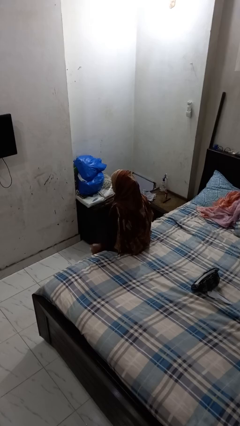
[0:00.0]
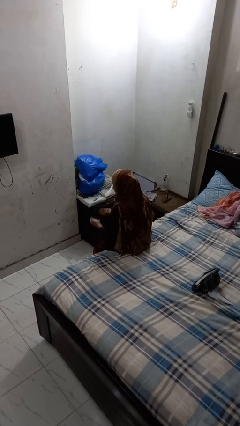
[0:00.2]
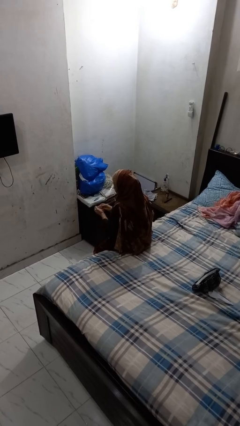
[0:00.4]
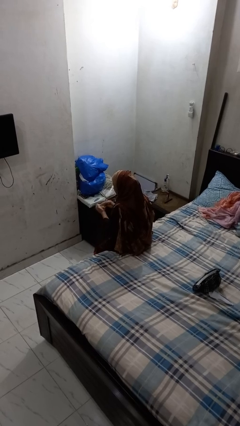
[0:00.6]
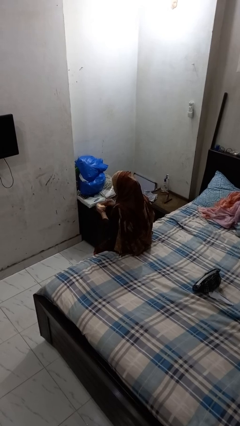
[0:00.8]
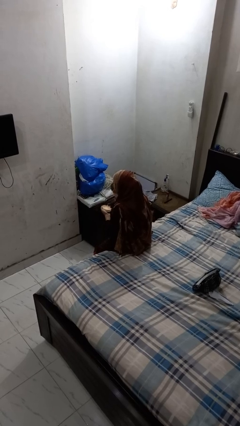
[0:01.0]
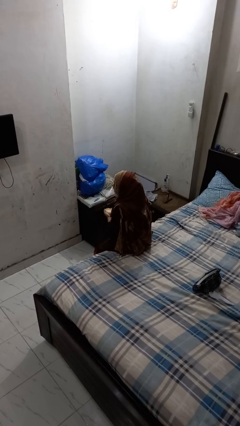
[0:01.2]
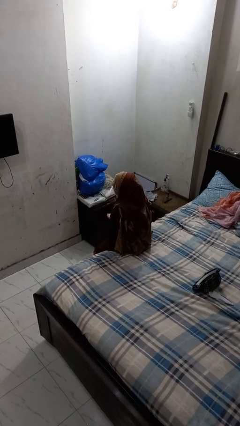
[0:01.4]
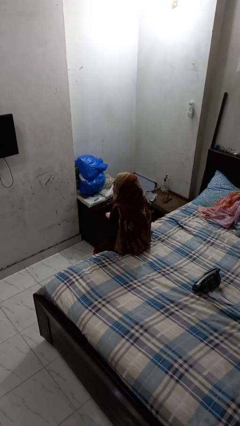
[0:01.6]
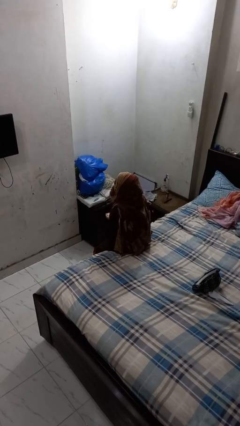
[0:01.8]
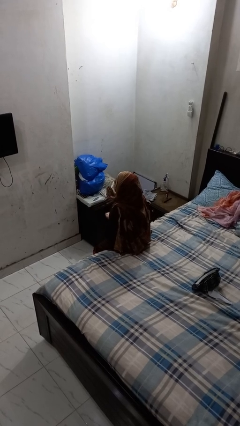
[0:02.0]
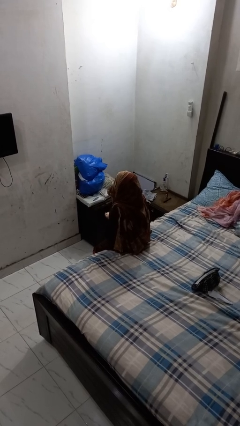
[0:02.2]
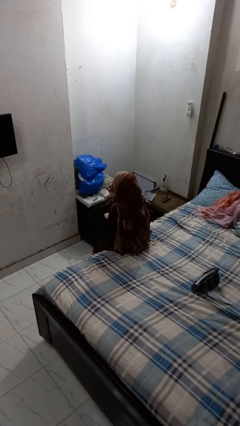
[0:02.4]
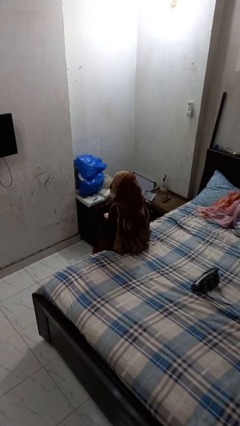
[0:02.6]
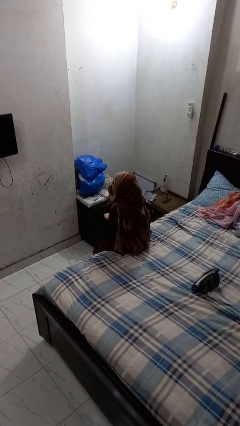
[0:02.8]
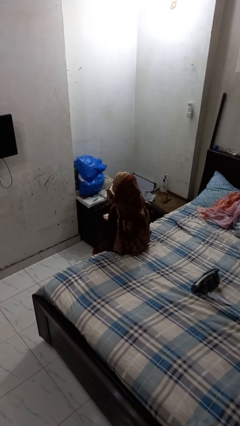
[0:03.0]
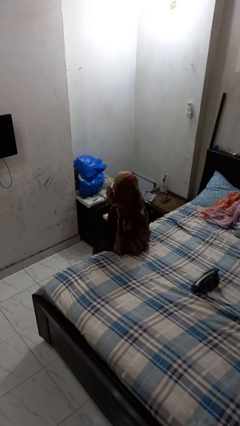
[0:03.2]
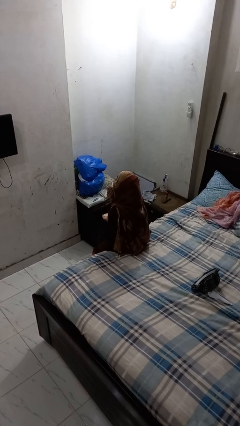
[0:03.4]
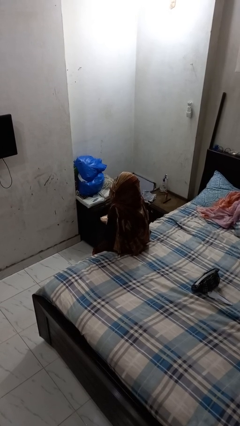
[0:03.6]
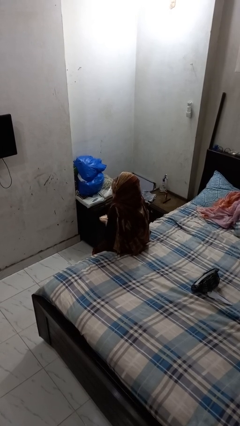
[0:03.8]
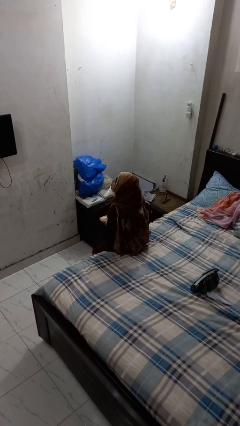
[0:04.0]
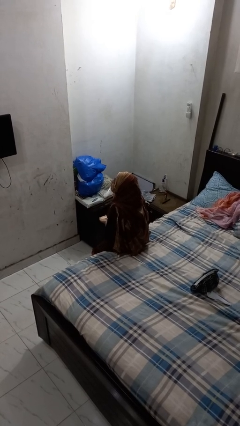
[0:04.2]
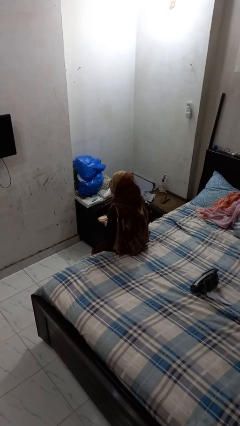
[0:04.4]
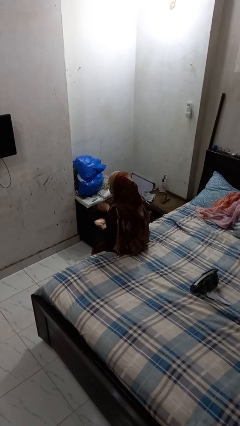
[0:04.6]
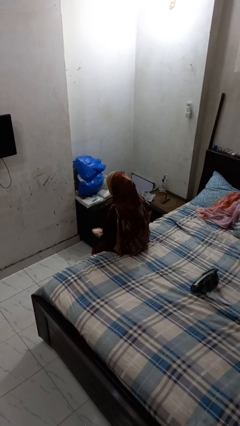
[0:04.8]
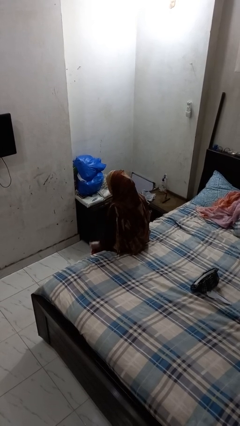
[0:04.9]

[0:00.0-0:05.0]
person applies foundation makeup

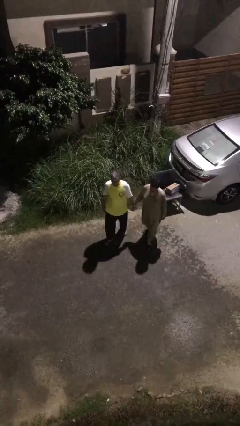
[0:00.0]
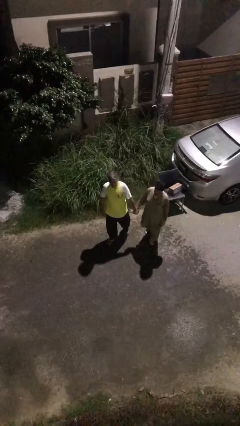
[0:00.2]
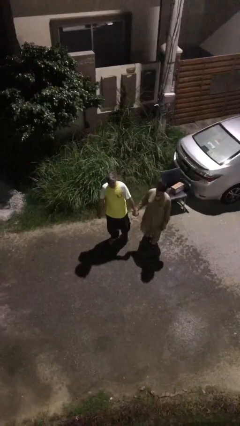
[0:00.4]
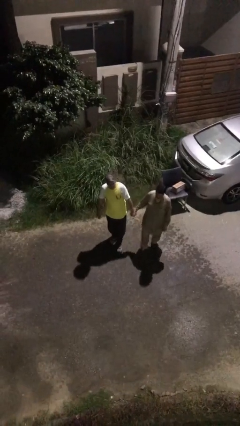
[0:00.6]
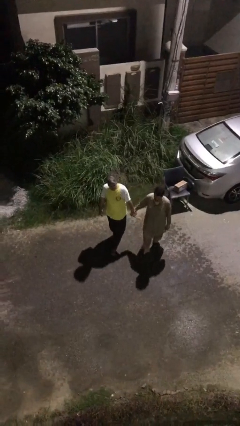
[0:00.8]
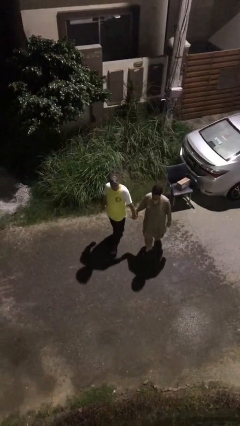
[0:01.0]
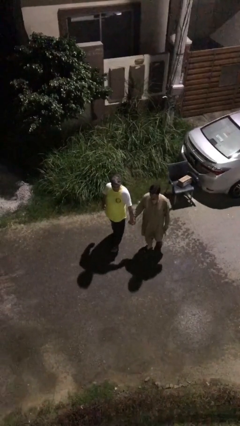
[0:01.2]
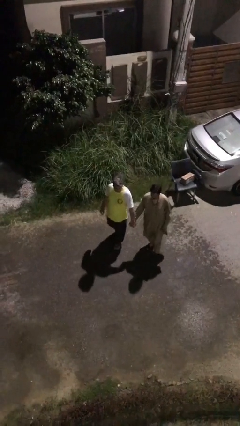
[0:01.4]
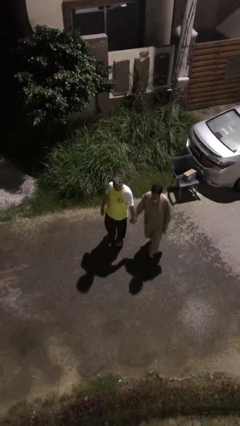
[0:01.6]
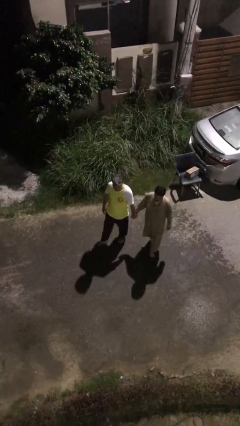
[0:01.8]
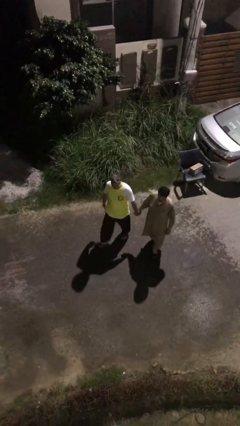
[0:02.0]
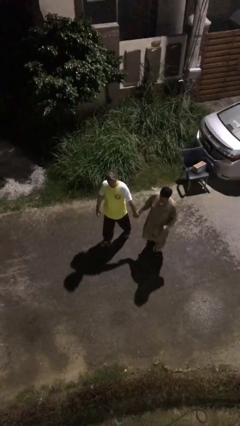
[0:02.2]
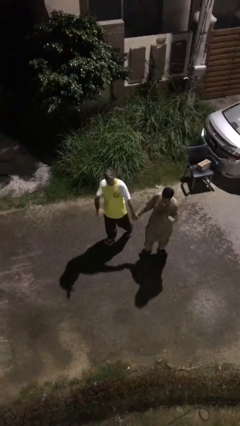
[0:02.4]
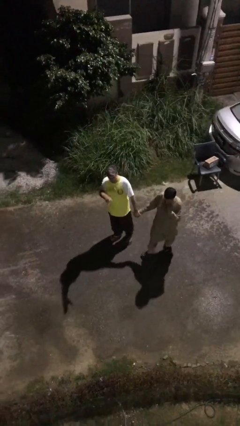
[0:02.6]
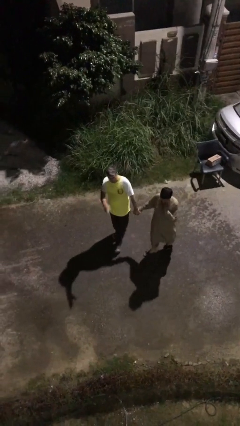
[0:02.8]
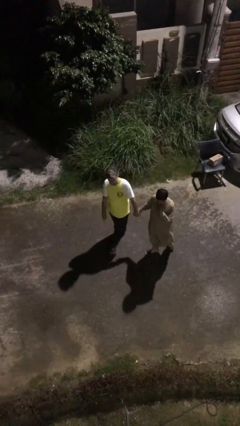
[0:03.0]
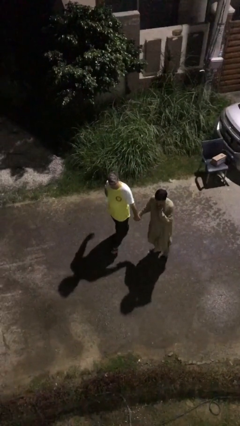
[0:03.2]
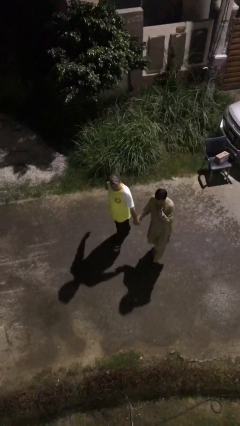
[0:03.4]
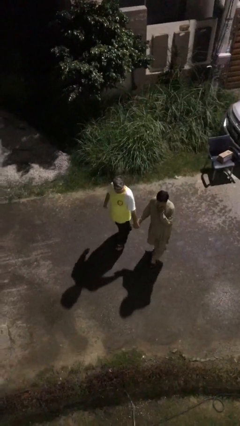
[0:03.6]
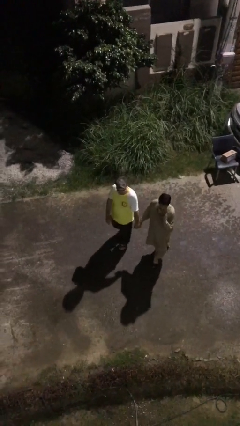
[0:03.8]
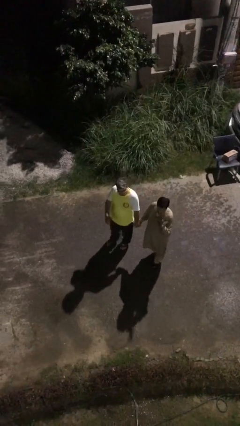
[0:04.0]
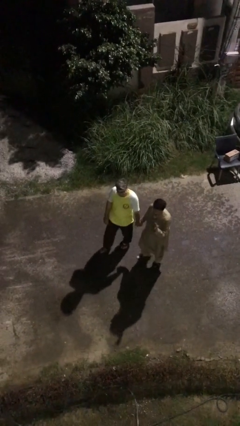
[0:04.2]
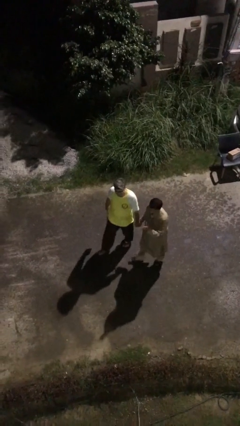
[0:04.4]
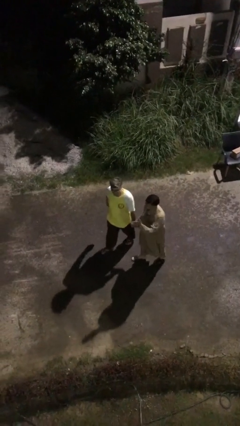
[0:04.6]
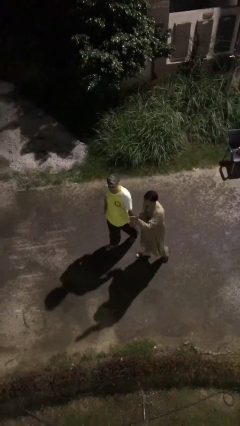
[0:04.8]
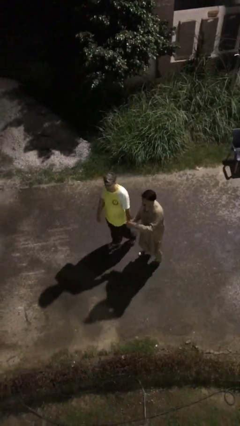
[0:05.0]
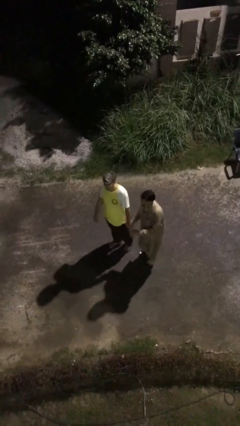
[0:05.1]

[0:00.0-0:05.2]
person holds hand

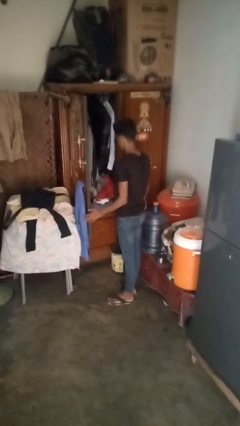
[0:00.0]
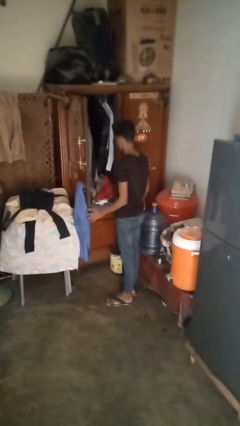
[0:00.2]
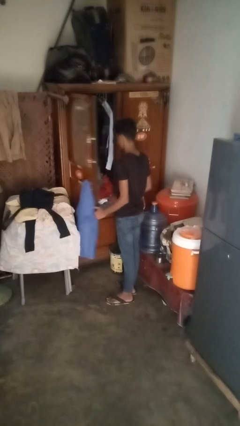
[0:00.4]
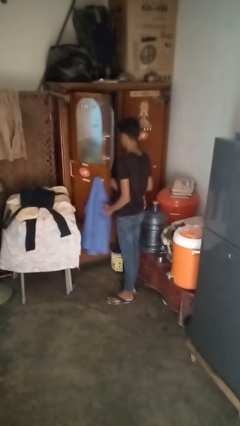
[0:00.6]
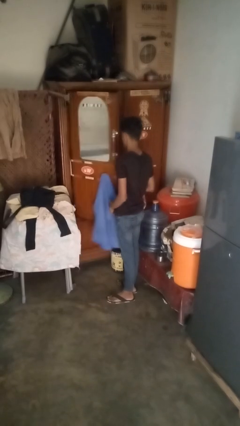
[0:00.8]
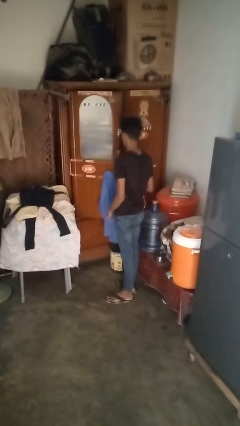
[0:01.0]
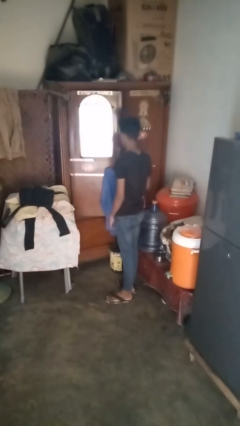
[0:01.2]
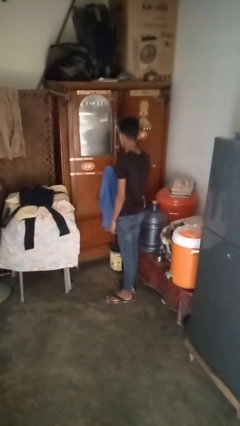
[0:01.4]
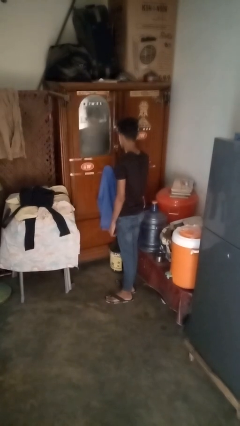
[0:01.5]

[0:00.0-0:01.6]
person closes dresser drawer

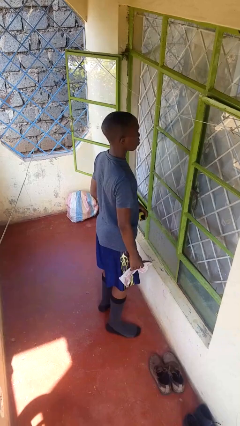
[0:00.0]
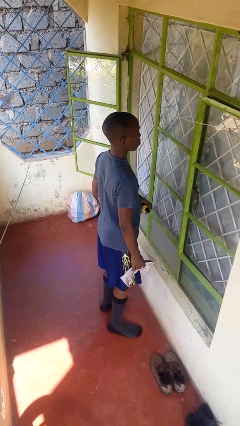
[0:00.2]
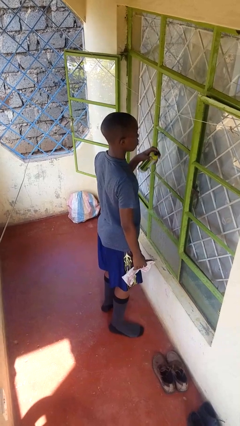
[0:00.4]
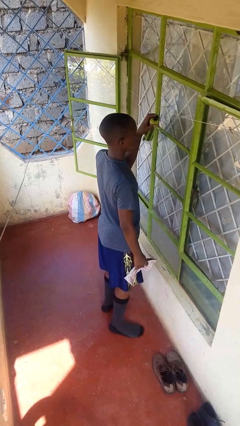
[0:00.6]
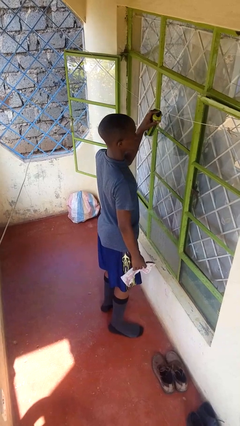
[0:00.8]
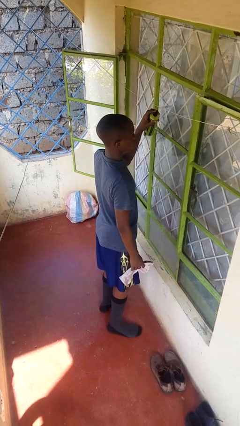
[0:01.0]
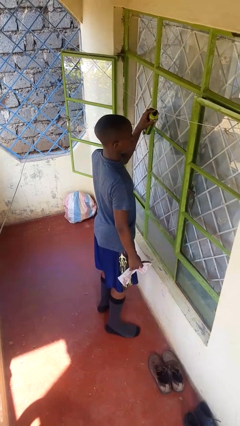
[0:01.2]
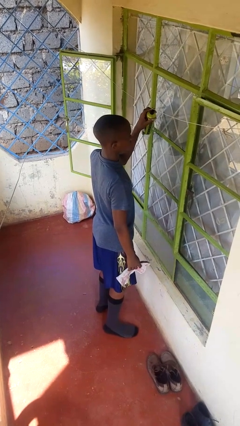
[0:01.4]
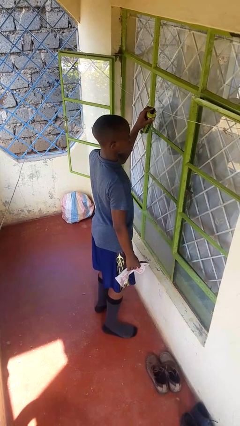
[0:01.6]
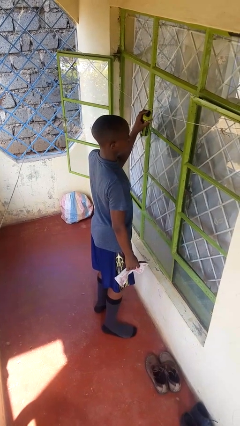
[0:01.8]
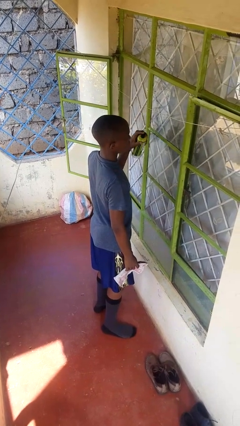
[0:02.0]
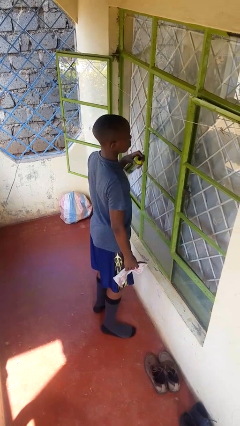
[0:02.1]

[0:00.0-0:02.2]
person sprays from bottle

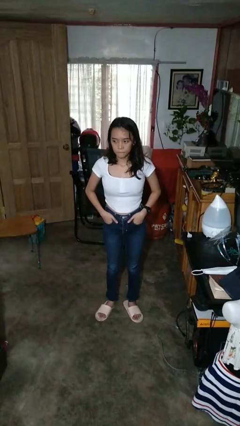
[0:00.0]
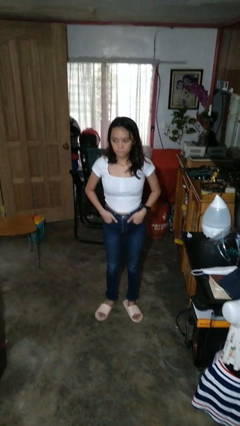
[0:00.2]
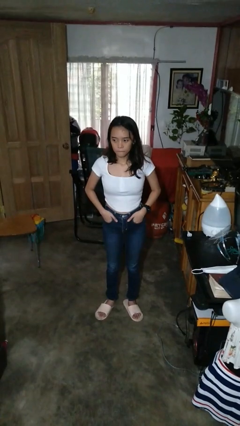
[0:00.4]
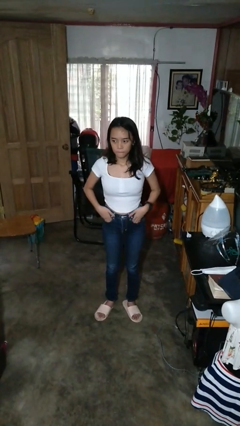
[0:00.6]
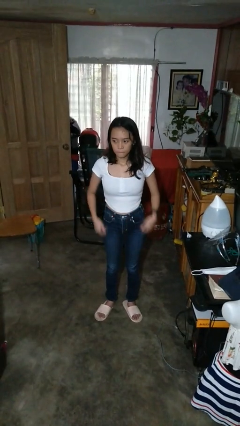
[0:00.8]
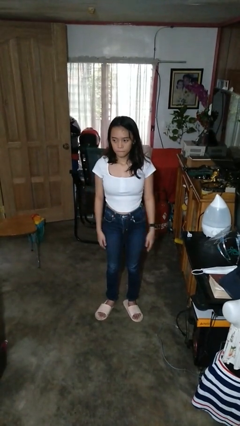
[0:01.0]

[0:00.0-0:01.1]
person puts hands in back pockets

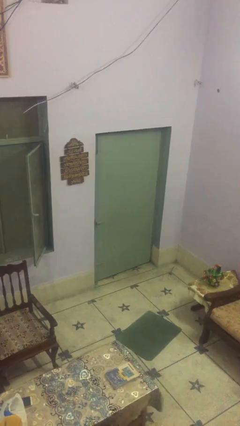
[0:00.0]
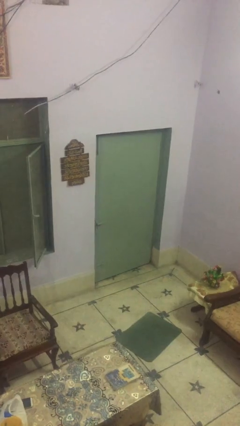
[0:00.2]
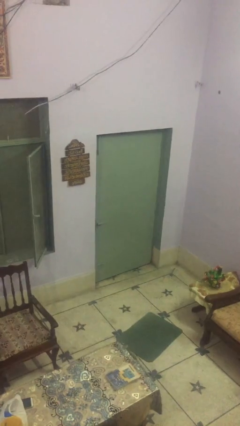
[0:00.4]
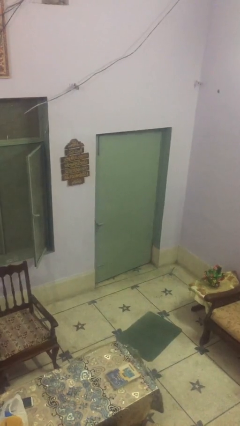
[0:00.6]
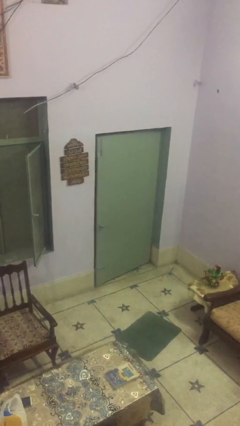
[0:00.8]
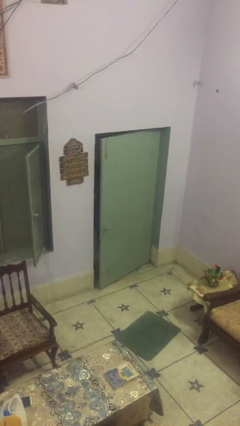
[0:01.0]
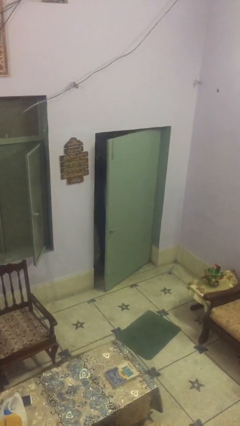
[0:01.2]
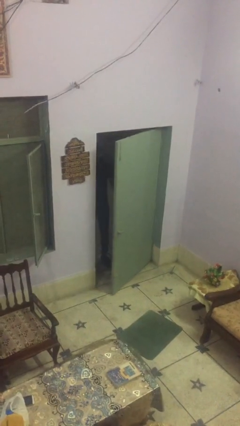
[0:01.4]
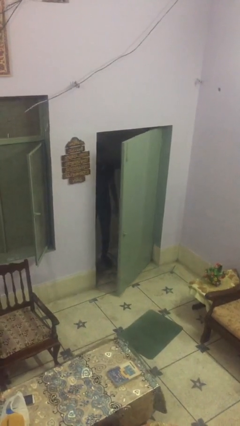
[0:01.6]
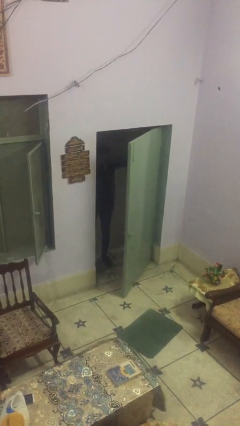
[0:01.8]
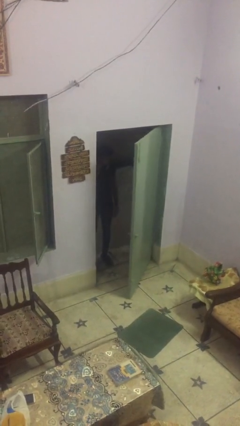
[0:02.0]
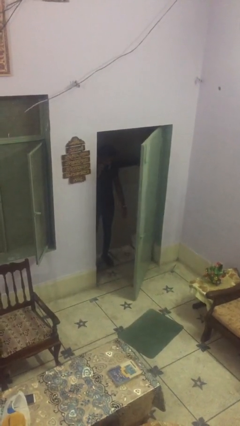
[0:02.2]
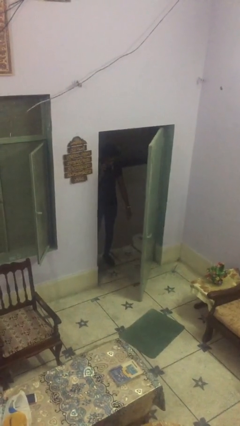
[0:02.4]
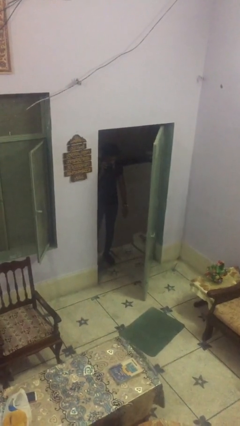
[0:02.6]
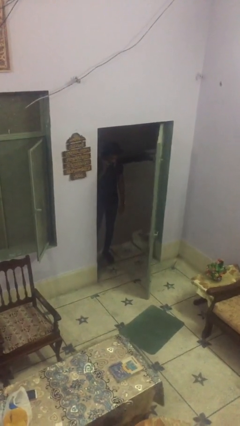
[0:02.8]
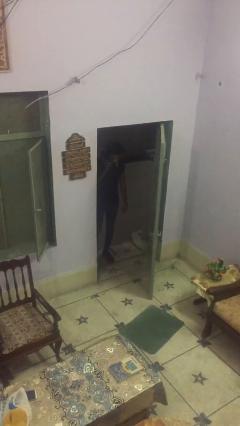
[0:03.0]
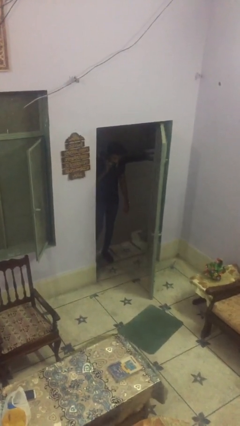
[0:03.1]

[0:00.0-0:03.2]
person opens facility door
